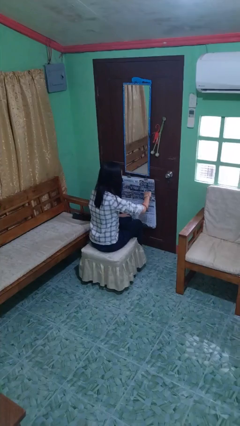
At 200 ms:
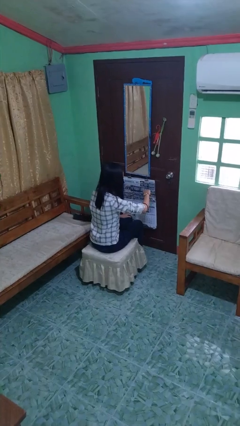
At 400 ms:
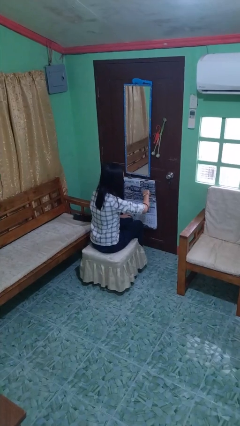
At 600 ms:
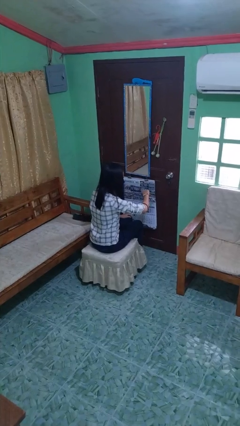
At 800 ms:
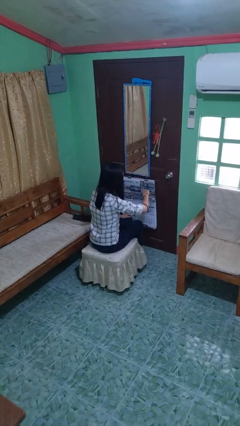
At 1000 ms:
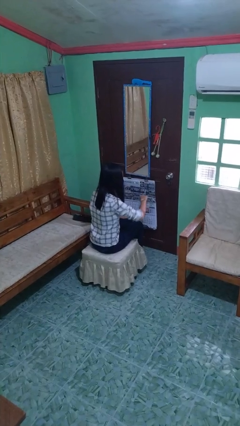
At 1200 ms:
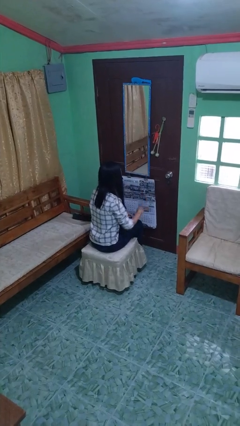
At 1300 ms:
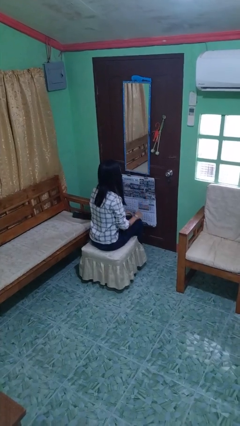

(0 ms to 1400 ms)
person looks at wristwatch

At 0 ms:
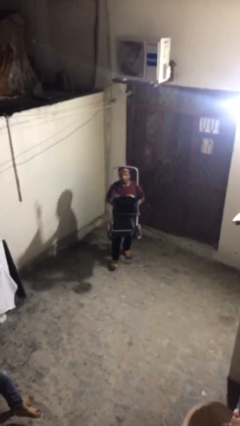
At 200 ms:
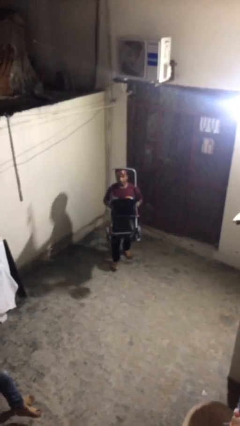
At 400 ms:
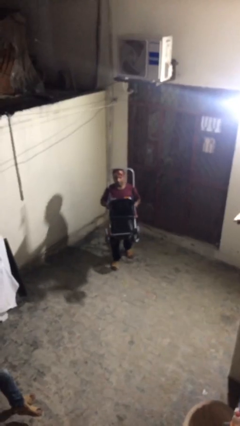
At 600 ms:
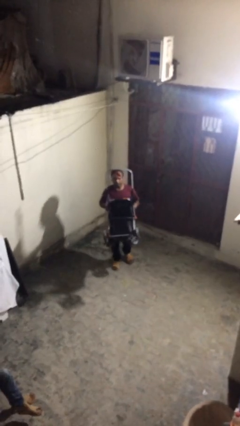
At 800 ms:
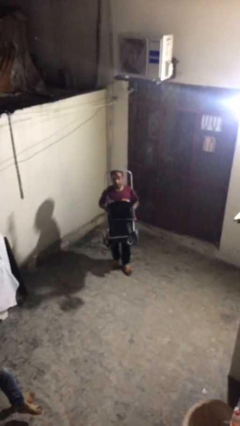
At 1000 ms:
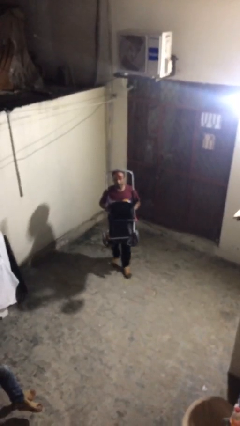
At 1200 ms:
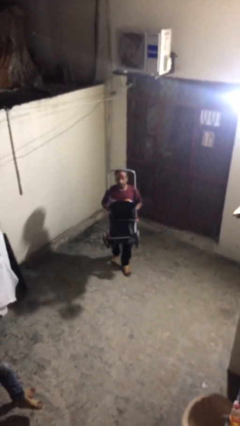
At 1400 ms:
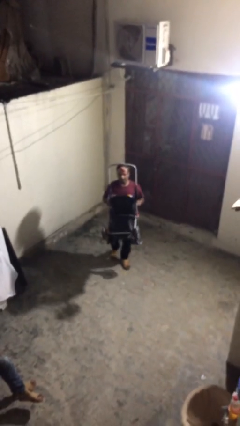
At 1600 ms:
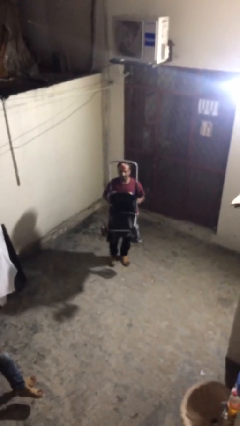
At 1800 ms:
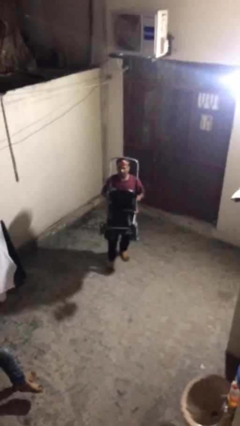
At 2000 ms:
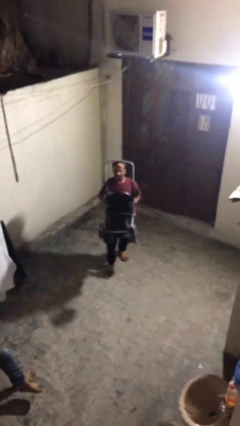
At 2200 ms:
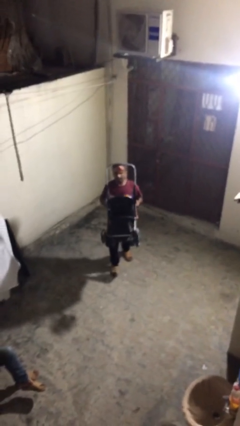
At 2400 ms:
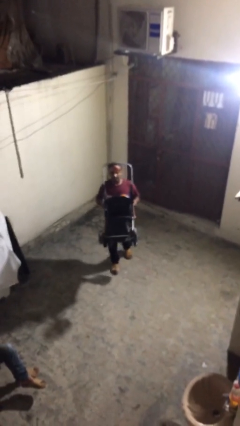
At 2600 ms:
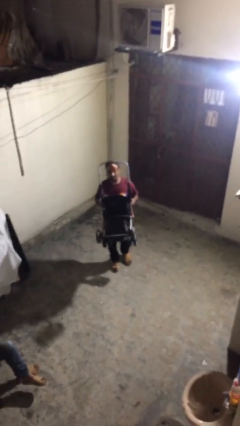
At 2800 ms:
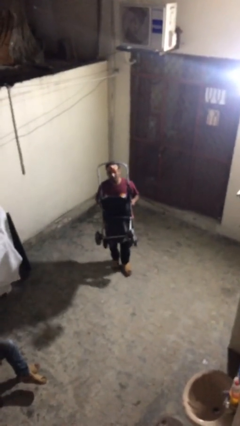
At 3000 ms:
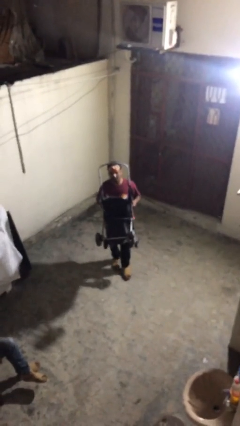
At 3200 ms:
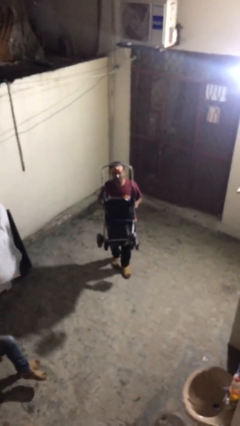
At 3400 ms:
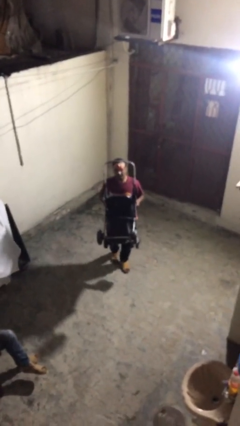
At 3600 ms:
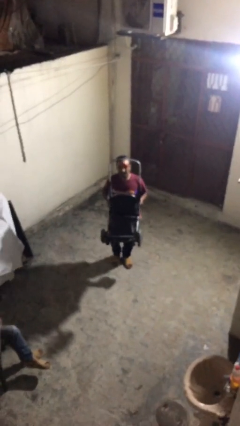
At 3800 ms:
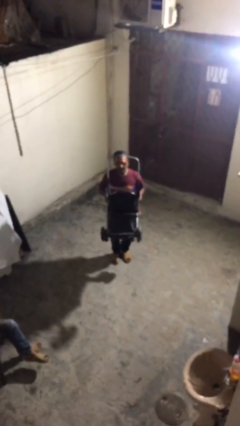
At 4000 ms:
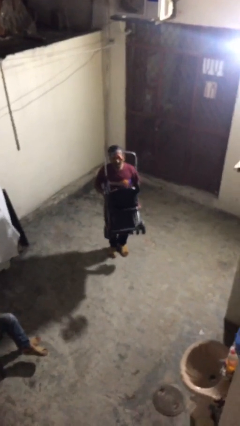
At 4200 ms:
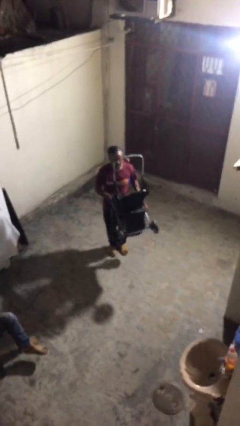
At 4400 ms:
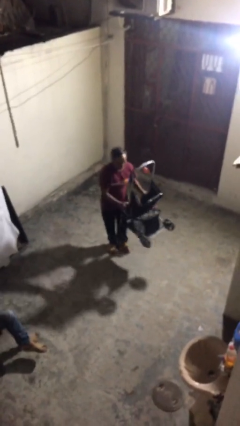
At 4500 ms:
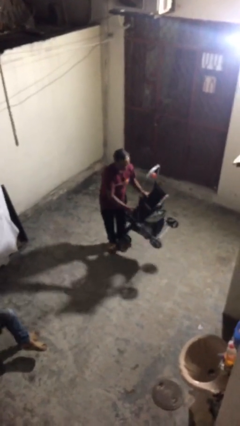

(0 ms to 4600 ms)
person carries heavy object

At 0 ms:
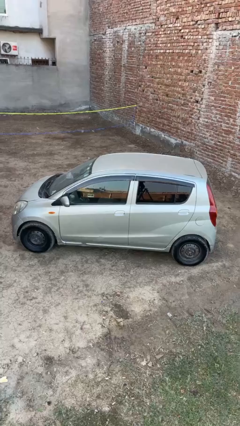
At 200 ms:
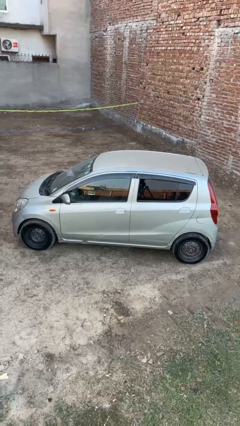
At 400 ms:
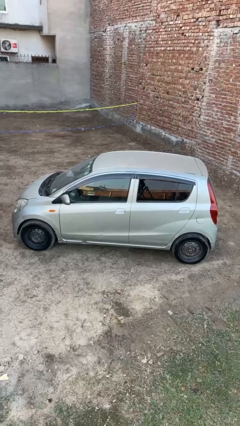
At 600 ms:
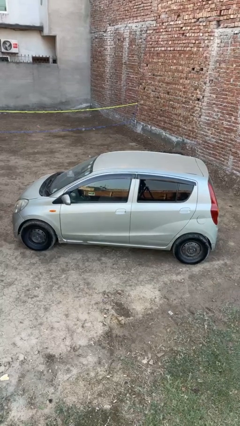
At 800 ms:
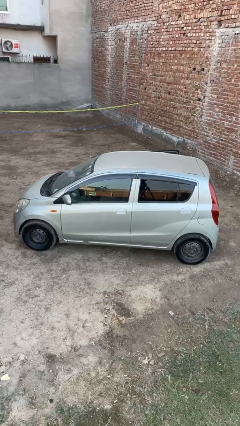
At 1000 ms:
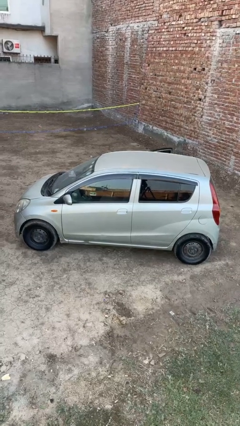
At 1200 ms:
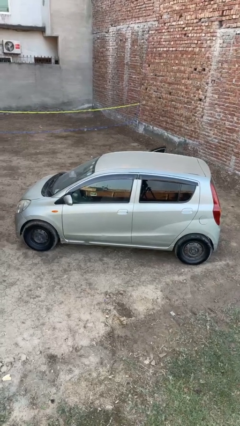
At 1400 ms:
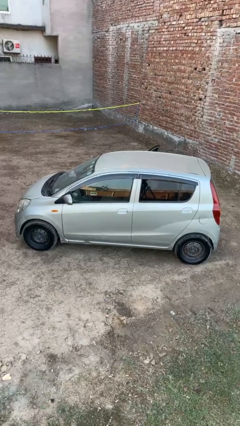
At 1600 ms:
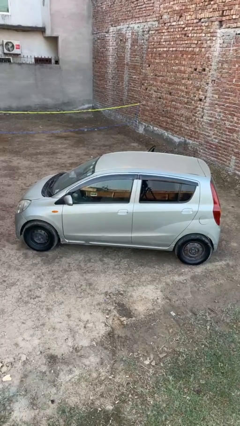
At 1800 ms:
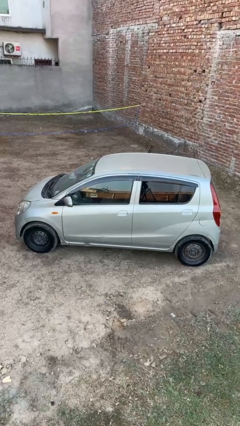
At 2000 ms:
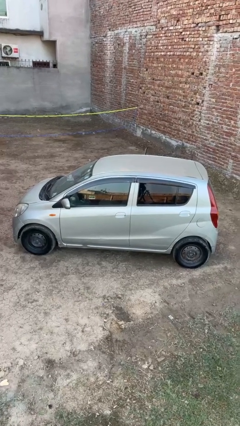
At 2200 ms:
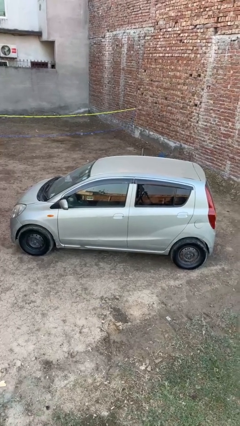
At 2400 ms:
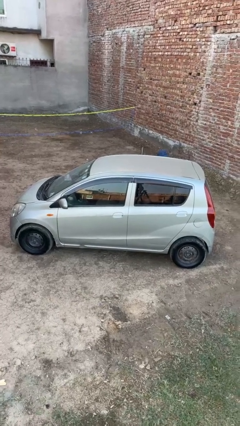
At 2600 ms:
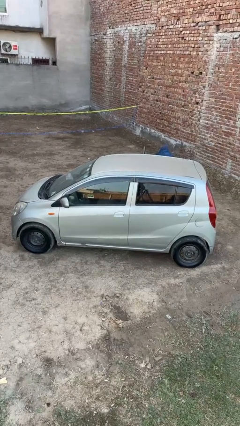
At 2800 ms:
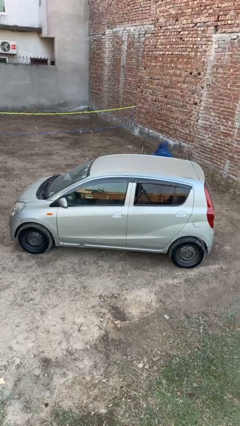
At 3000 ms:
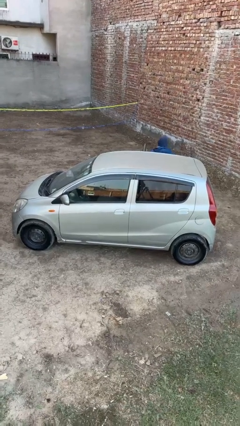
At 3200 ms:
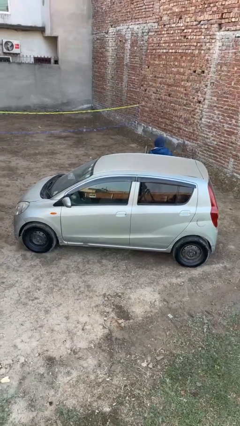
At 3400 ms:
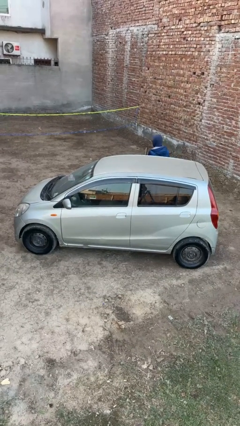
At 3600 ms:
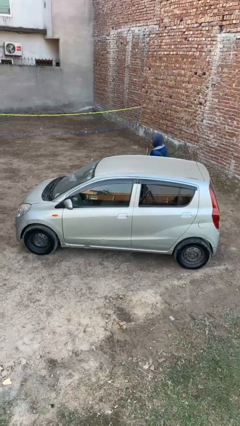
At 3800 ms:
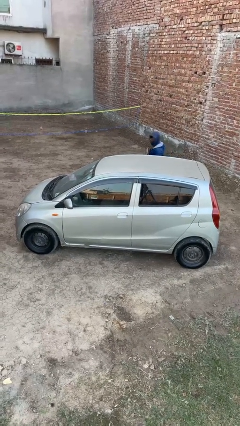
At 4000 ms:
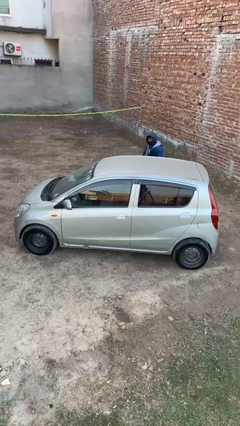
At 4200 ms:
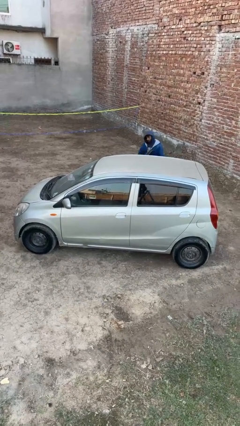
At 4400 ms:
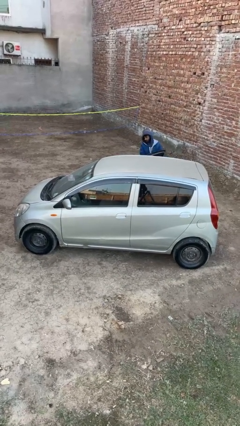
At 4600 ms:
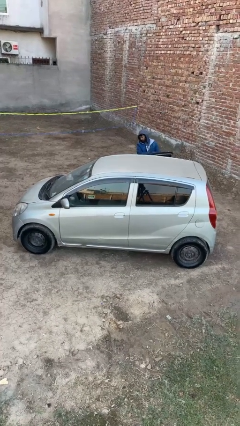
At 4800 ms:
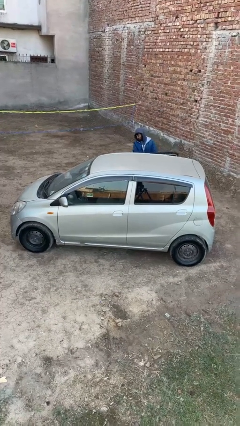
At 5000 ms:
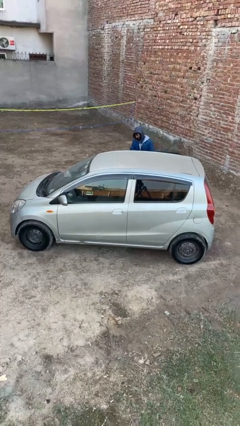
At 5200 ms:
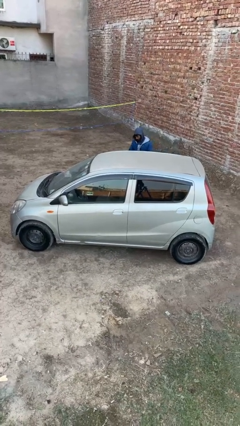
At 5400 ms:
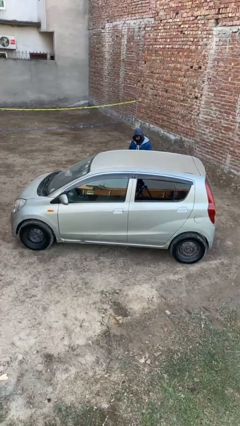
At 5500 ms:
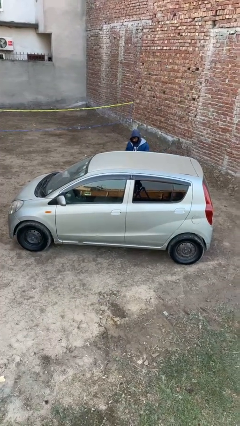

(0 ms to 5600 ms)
car drops off person

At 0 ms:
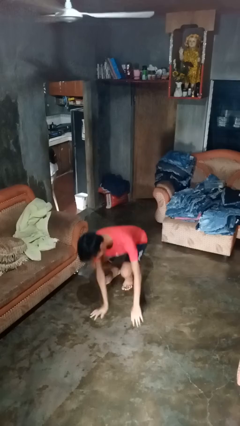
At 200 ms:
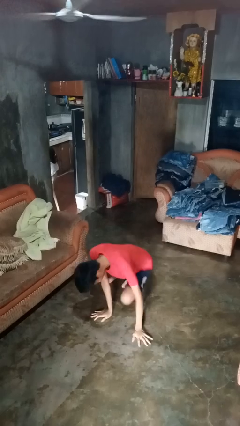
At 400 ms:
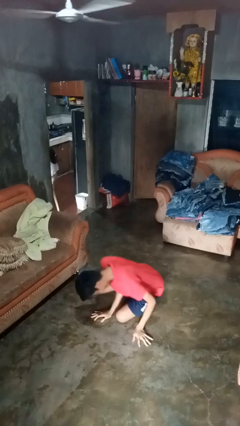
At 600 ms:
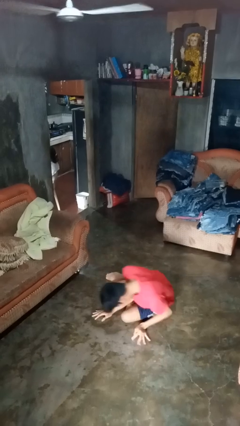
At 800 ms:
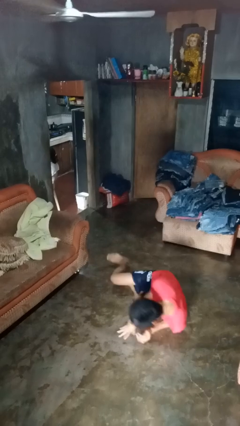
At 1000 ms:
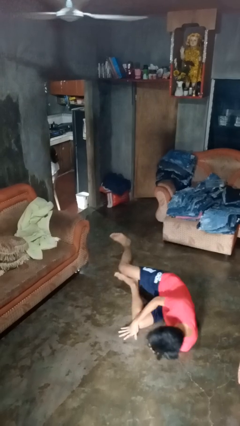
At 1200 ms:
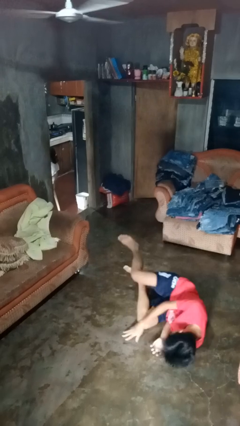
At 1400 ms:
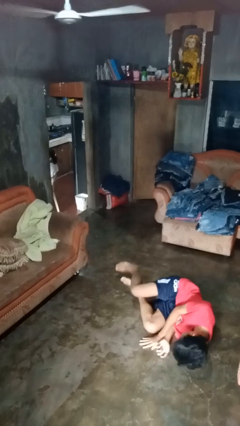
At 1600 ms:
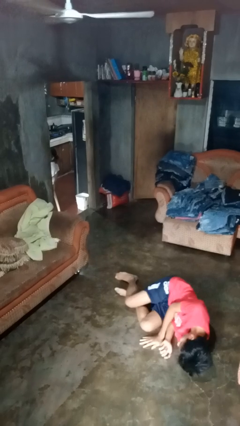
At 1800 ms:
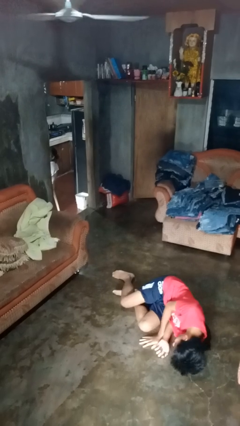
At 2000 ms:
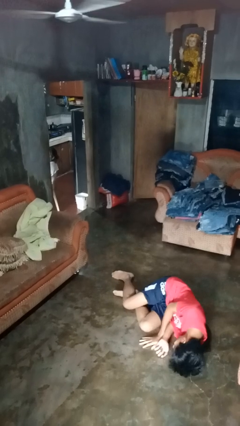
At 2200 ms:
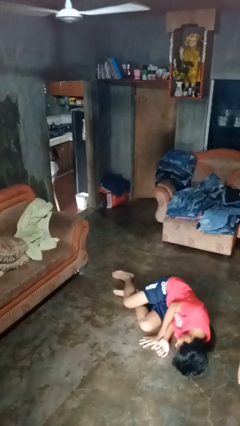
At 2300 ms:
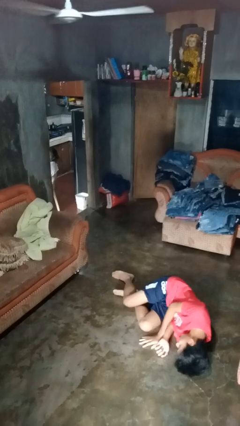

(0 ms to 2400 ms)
person falls while standing

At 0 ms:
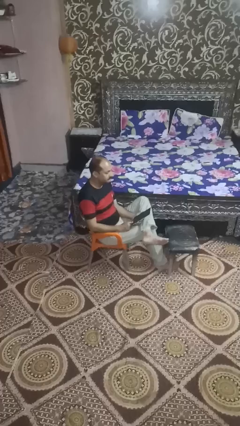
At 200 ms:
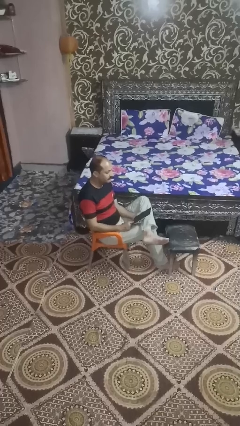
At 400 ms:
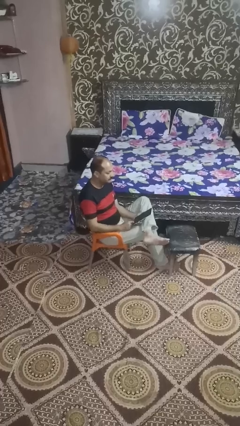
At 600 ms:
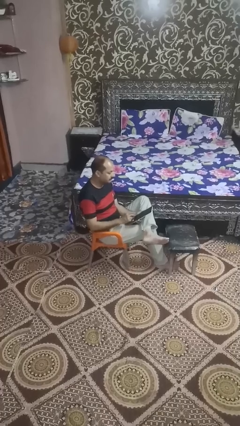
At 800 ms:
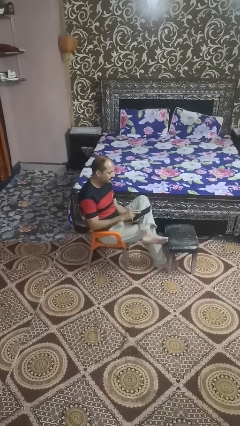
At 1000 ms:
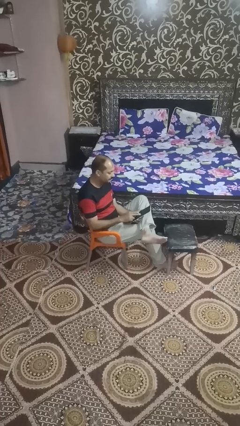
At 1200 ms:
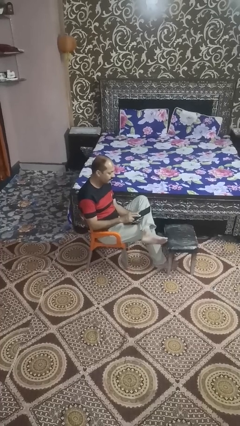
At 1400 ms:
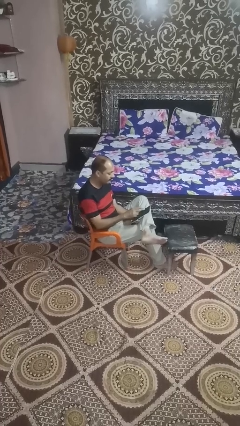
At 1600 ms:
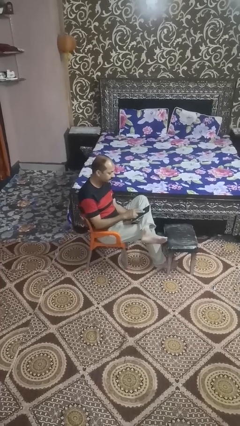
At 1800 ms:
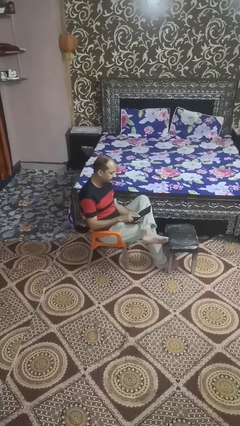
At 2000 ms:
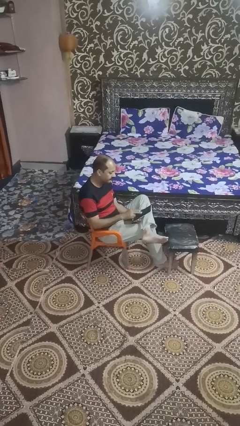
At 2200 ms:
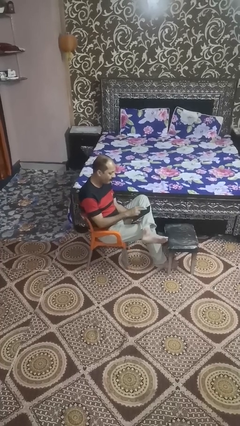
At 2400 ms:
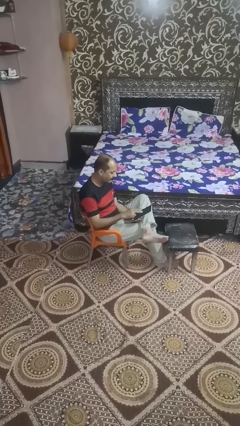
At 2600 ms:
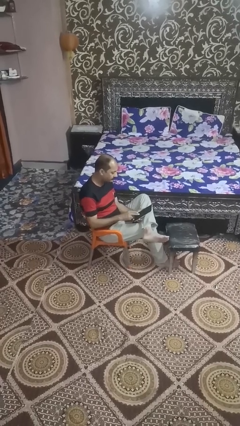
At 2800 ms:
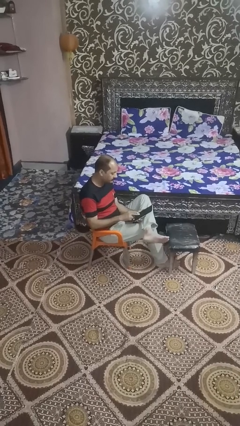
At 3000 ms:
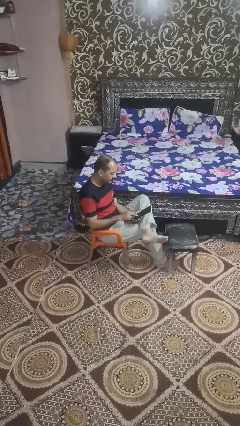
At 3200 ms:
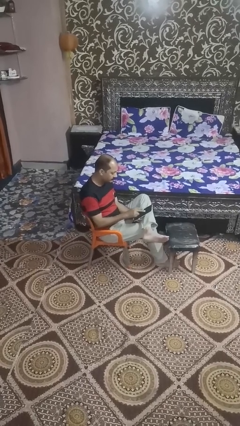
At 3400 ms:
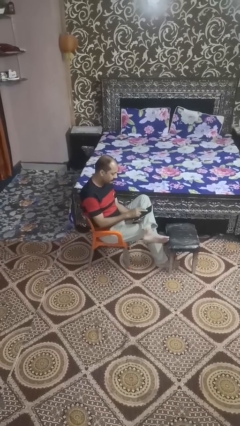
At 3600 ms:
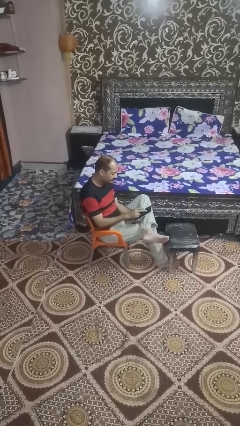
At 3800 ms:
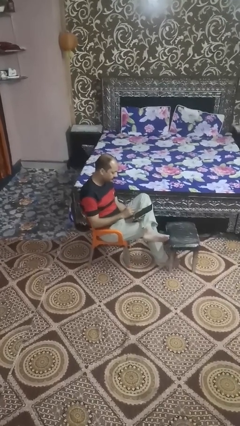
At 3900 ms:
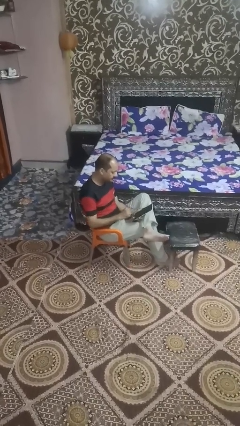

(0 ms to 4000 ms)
person interacts with tablet
